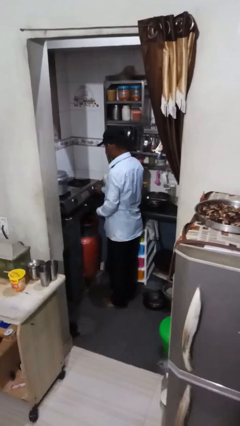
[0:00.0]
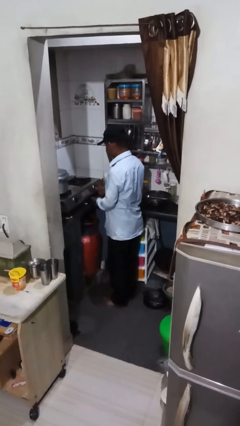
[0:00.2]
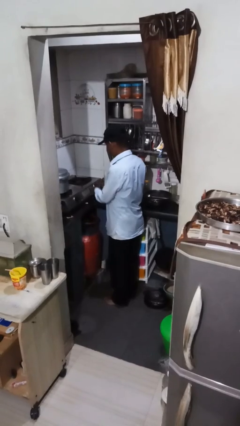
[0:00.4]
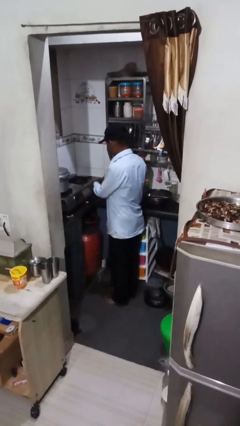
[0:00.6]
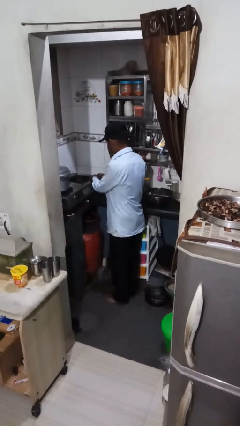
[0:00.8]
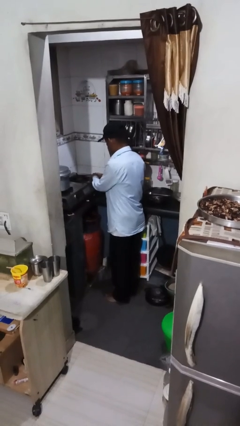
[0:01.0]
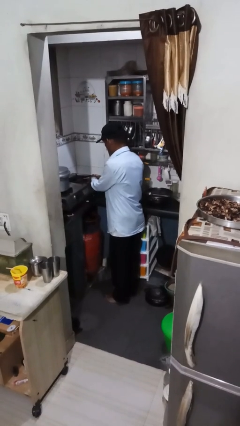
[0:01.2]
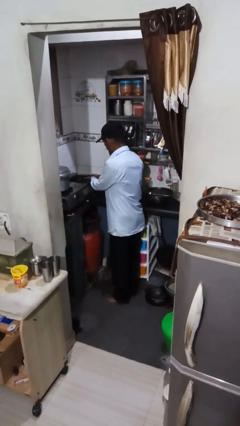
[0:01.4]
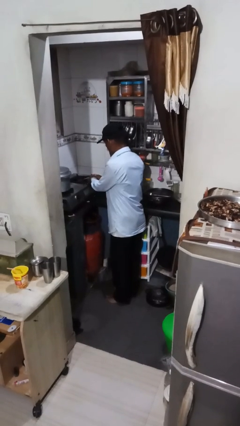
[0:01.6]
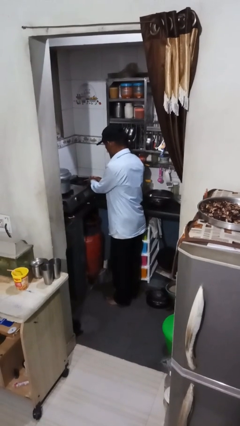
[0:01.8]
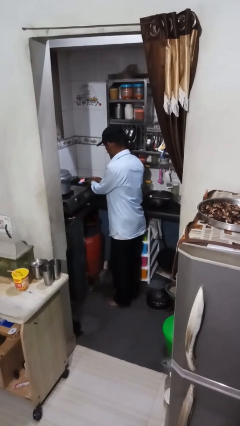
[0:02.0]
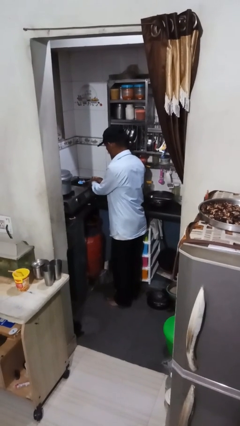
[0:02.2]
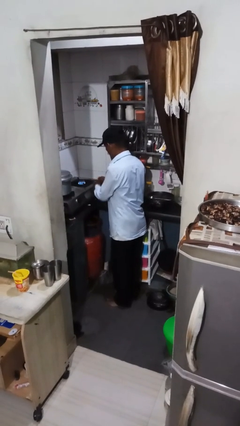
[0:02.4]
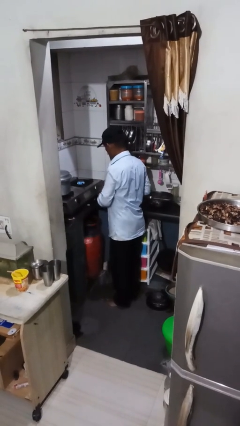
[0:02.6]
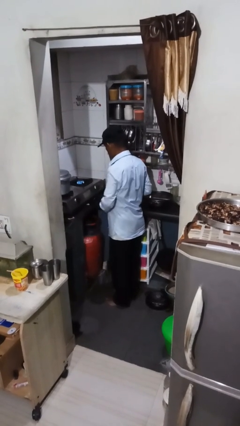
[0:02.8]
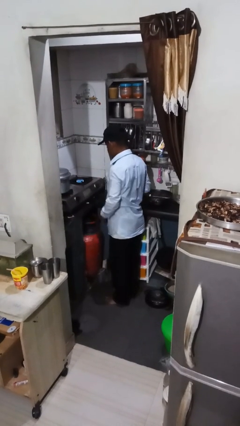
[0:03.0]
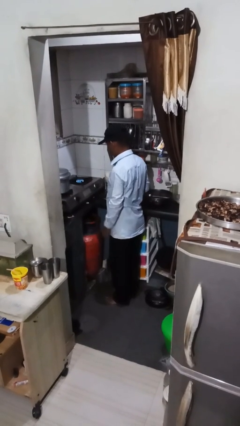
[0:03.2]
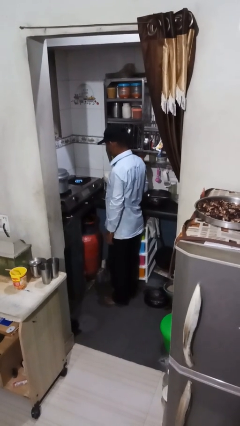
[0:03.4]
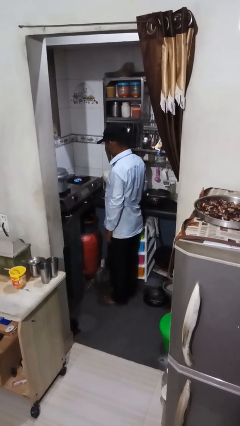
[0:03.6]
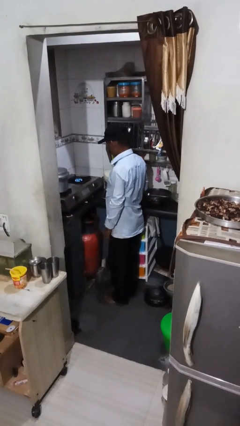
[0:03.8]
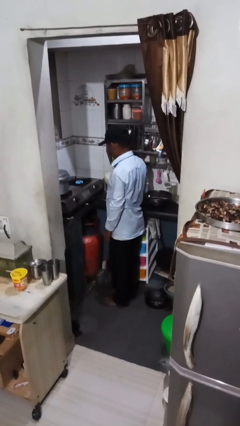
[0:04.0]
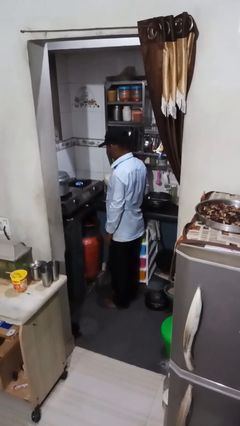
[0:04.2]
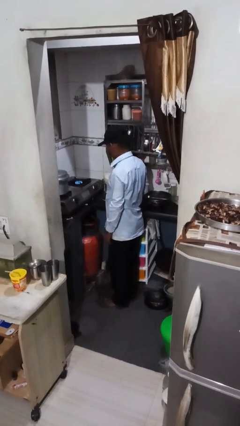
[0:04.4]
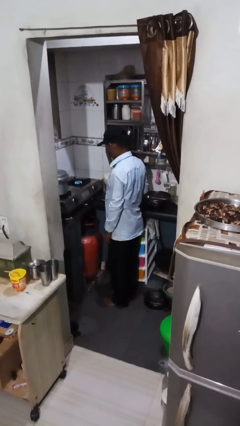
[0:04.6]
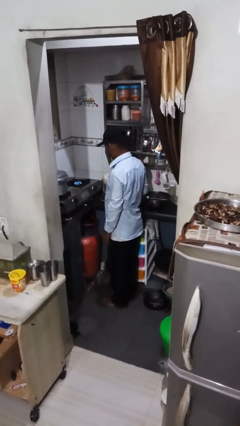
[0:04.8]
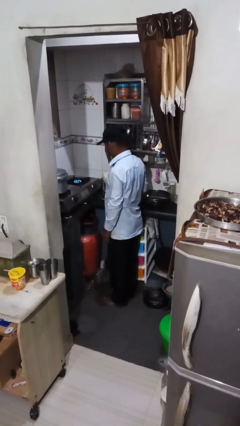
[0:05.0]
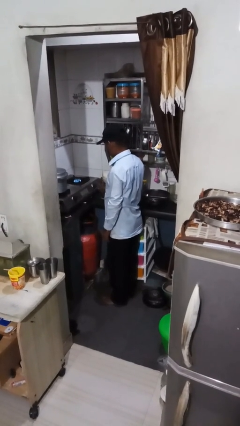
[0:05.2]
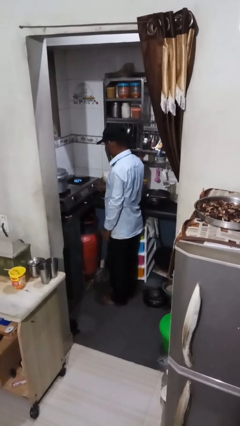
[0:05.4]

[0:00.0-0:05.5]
person turns on stovetop

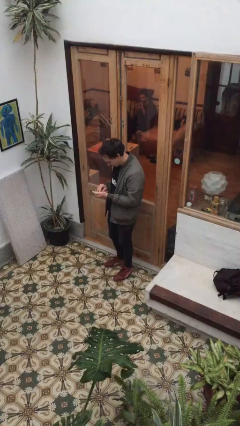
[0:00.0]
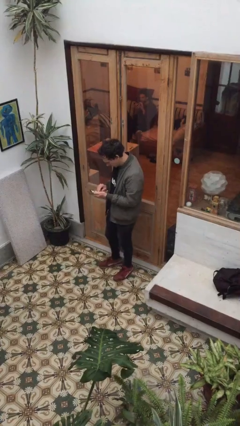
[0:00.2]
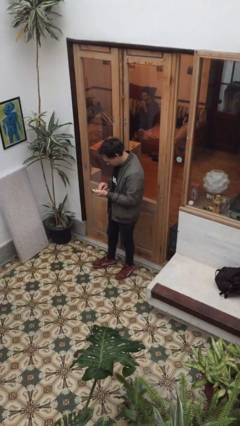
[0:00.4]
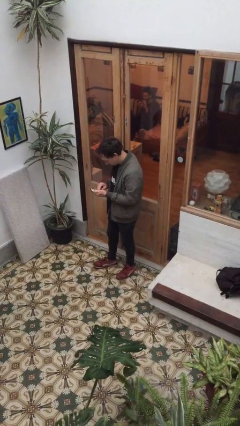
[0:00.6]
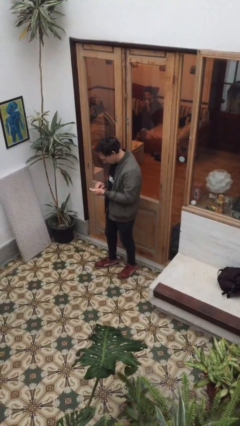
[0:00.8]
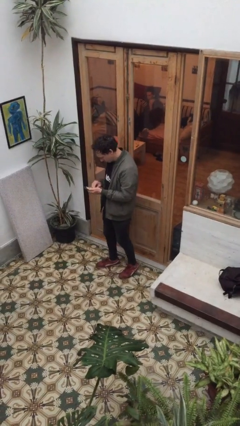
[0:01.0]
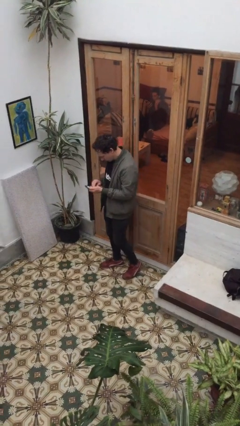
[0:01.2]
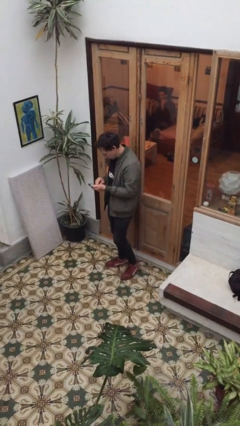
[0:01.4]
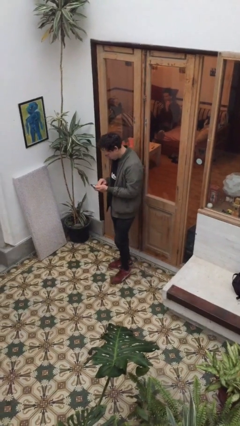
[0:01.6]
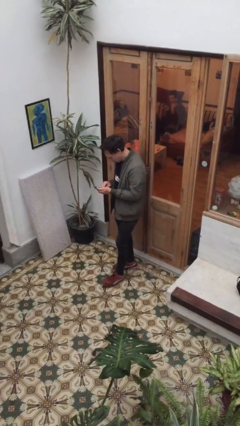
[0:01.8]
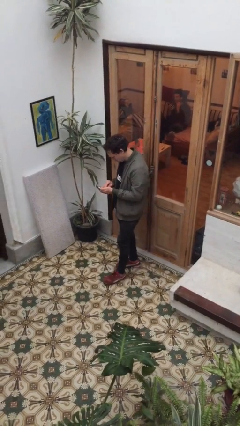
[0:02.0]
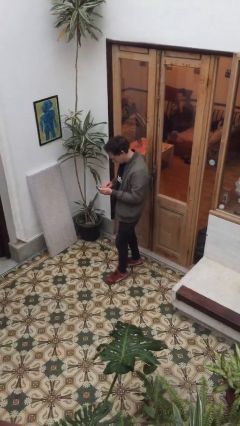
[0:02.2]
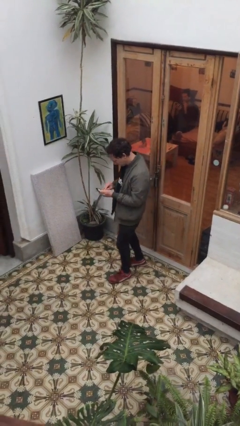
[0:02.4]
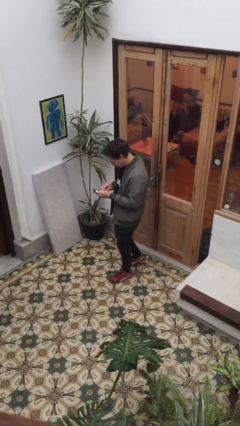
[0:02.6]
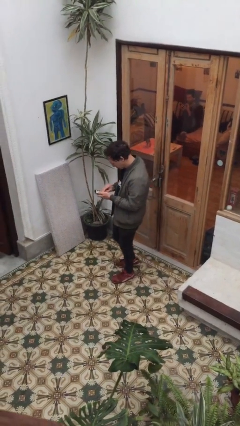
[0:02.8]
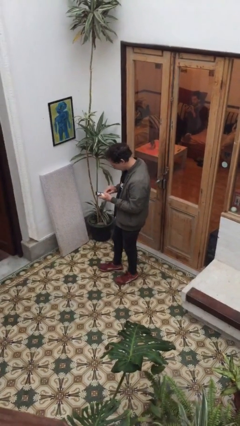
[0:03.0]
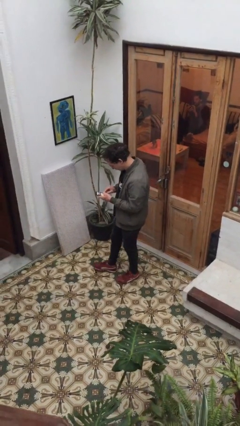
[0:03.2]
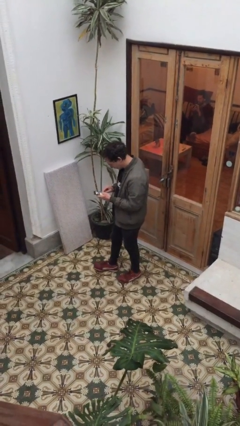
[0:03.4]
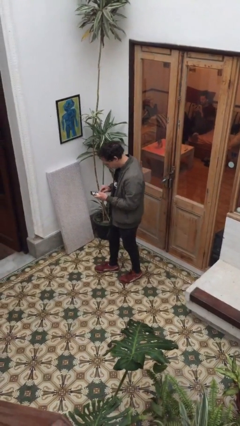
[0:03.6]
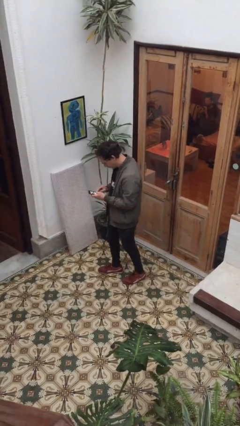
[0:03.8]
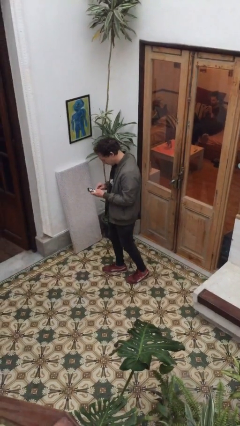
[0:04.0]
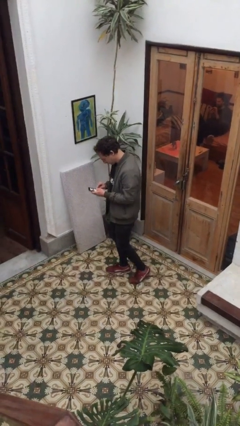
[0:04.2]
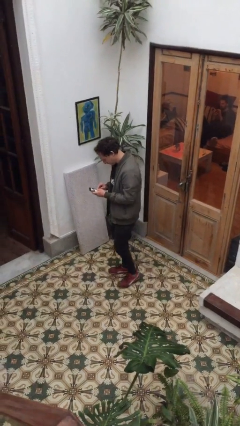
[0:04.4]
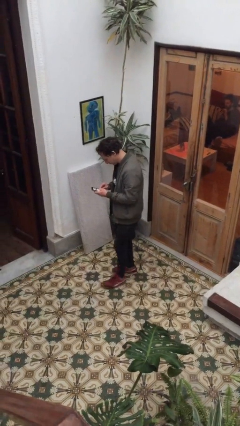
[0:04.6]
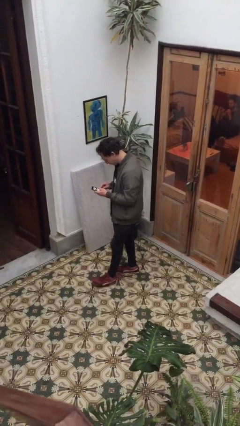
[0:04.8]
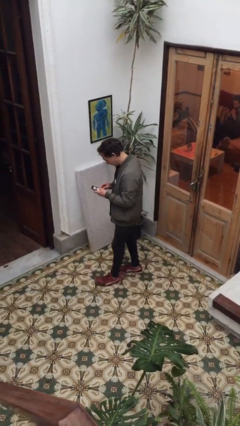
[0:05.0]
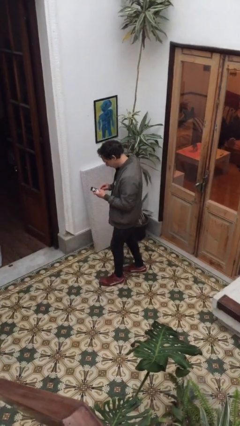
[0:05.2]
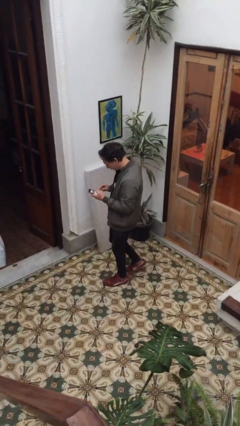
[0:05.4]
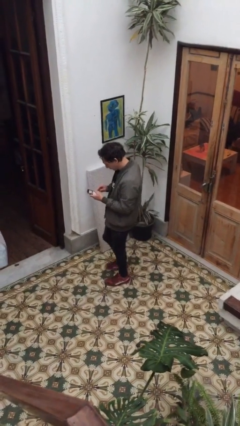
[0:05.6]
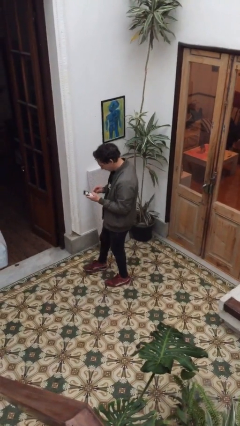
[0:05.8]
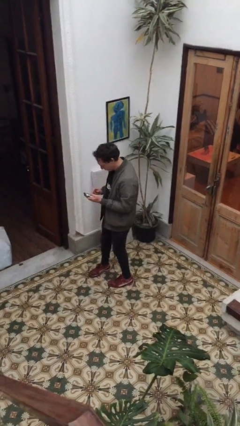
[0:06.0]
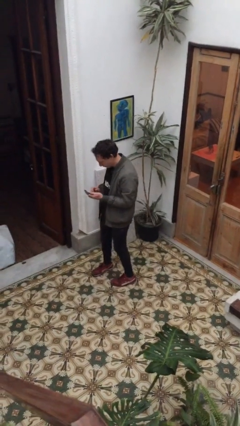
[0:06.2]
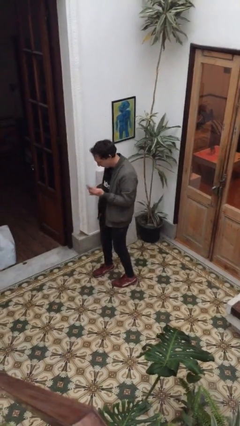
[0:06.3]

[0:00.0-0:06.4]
person texts on phone

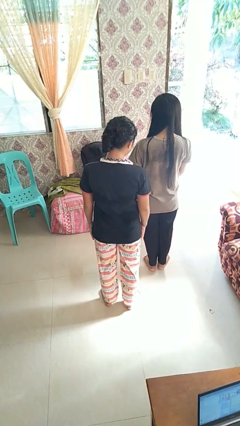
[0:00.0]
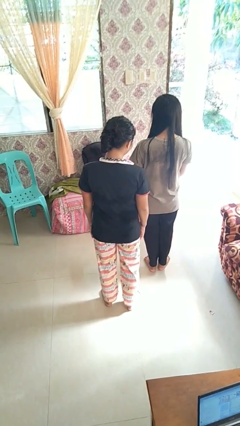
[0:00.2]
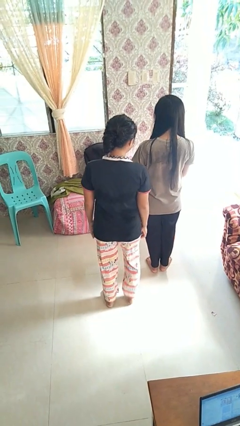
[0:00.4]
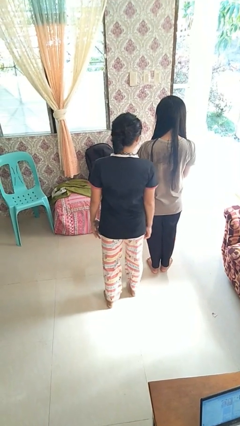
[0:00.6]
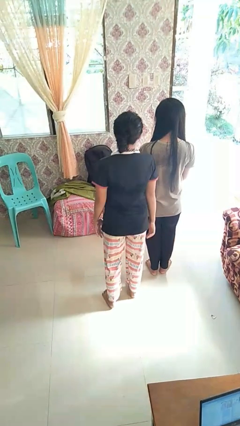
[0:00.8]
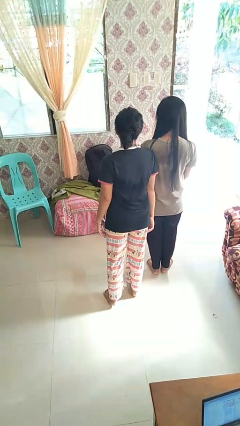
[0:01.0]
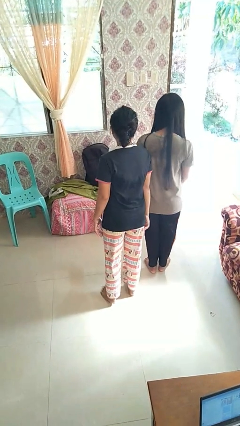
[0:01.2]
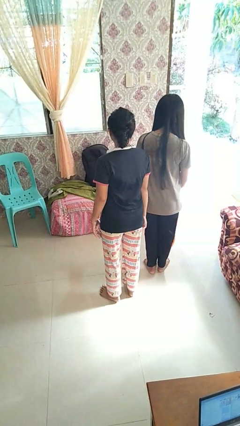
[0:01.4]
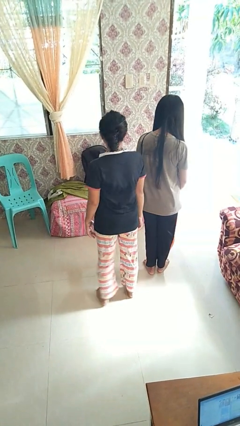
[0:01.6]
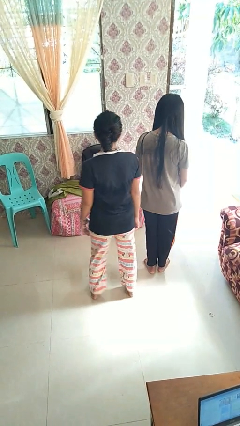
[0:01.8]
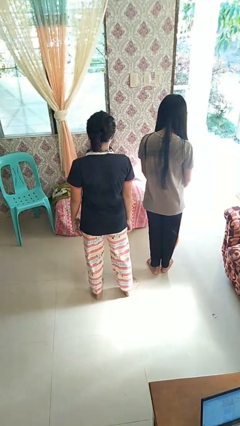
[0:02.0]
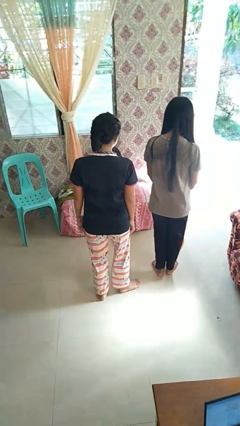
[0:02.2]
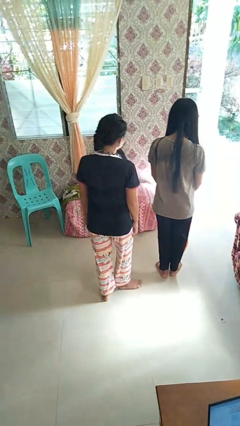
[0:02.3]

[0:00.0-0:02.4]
person bumps into person

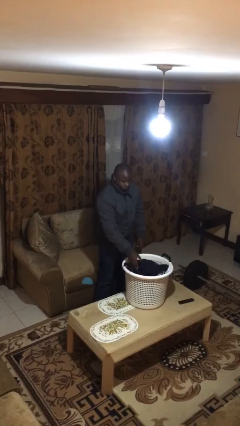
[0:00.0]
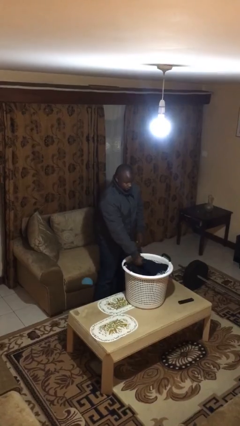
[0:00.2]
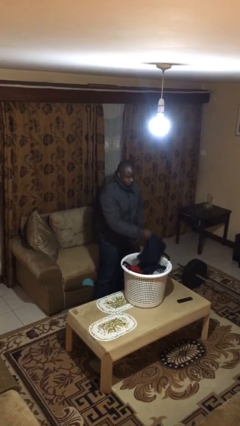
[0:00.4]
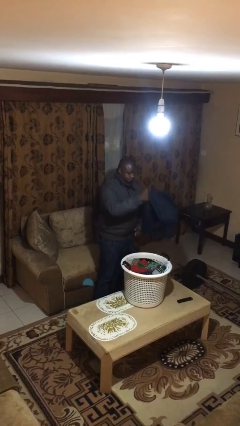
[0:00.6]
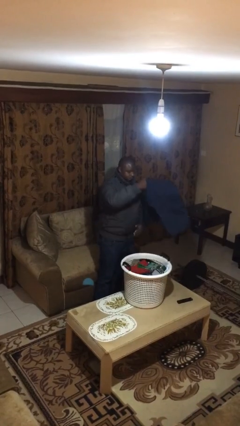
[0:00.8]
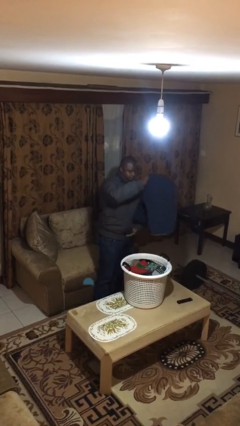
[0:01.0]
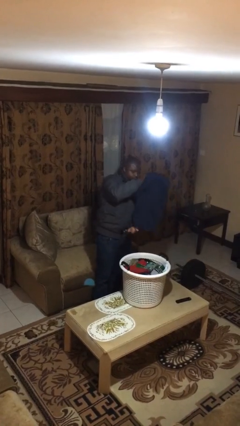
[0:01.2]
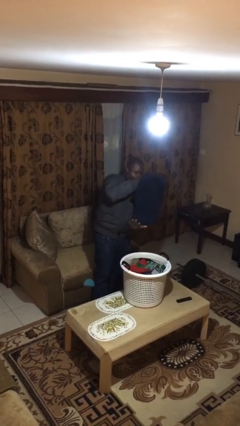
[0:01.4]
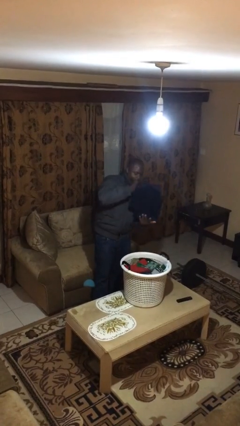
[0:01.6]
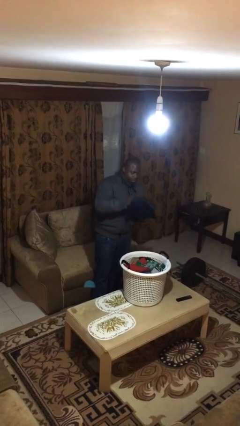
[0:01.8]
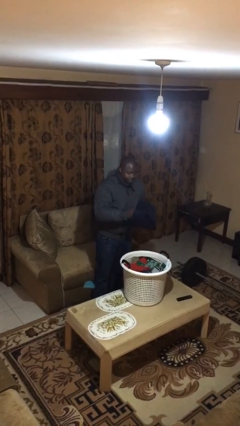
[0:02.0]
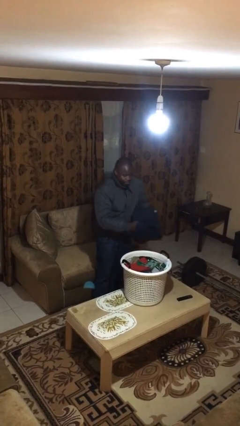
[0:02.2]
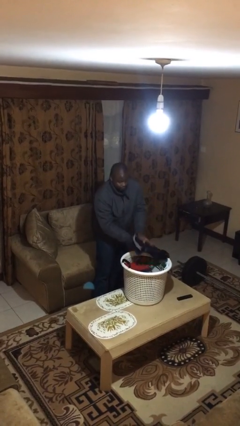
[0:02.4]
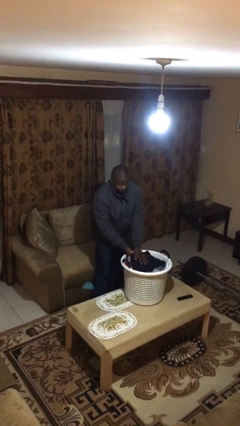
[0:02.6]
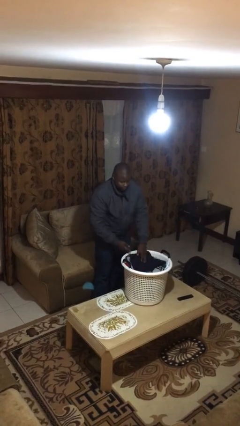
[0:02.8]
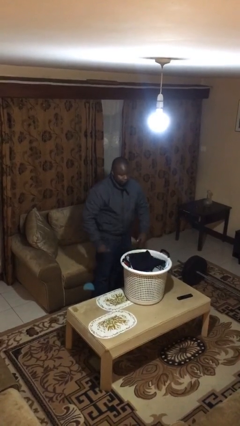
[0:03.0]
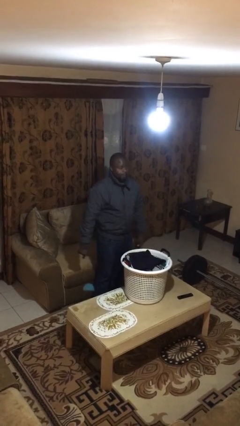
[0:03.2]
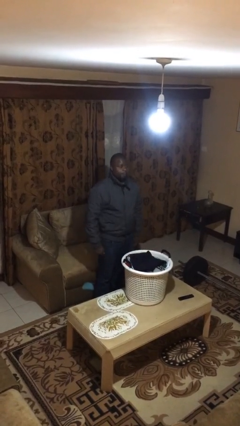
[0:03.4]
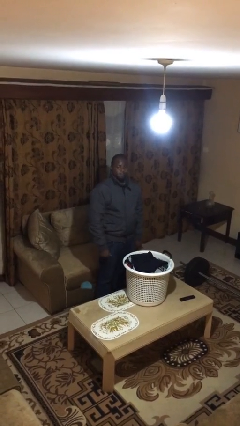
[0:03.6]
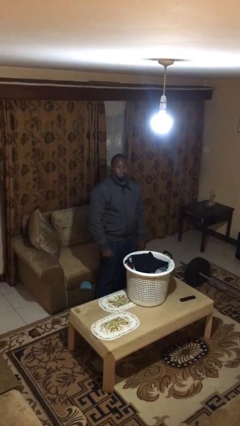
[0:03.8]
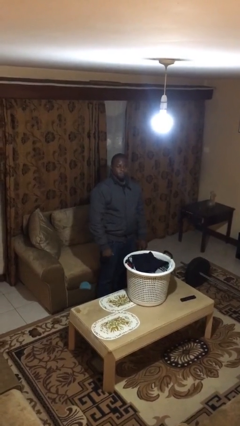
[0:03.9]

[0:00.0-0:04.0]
person folds pants
